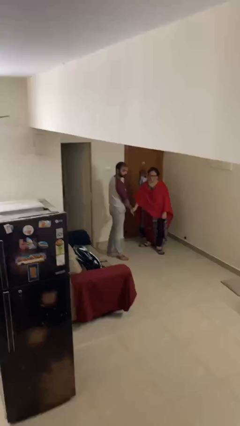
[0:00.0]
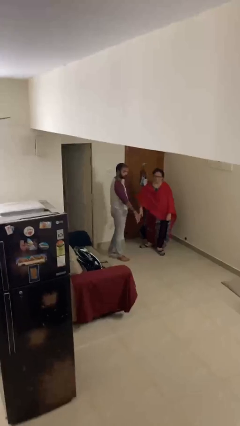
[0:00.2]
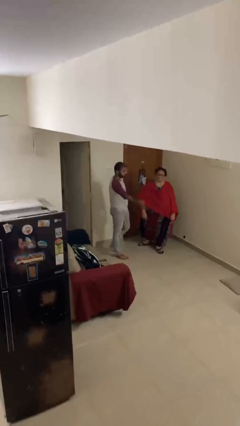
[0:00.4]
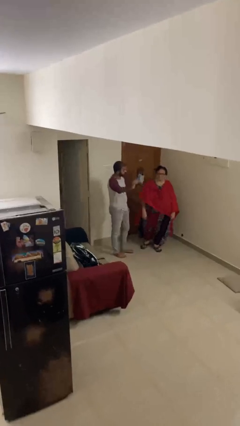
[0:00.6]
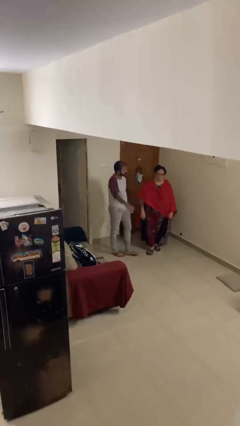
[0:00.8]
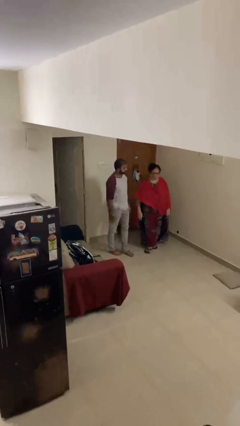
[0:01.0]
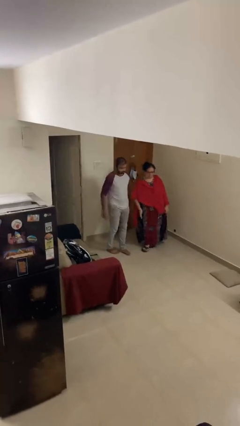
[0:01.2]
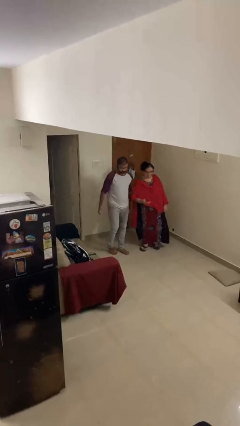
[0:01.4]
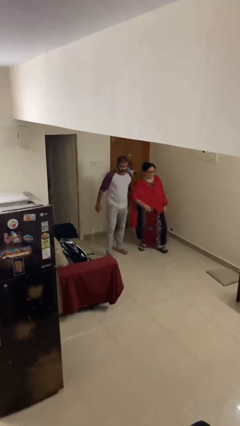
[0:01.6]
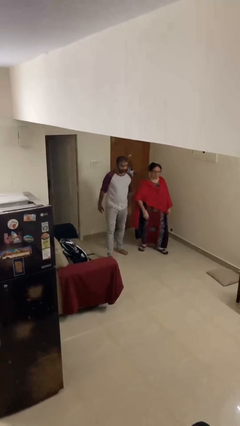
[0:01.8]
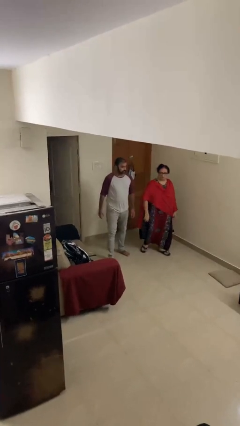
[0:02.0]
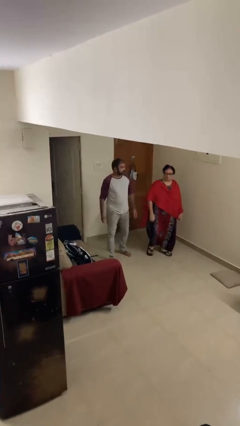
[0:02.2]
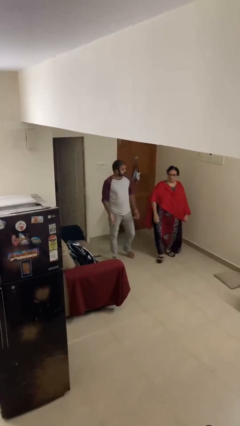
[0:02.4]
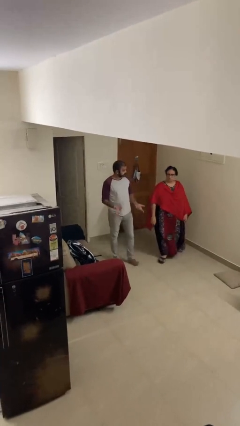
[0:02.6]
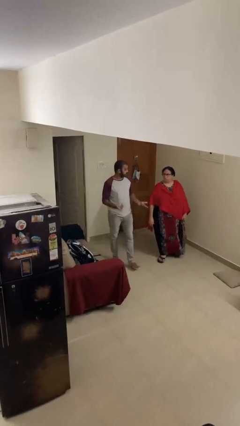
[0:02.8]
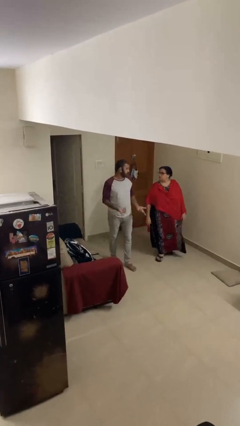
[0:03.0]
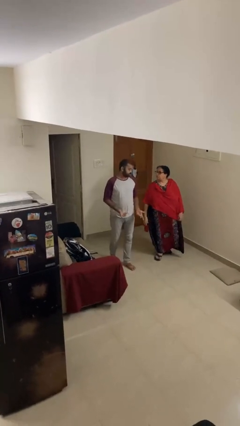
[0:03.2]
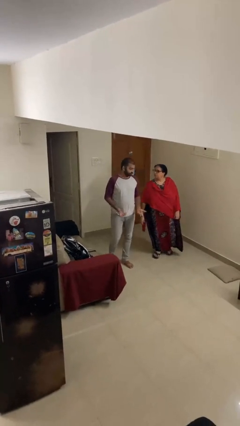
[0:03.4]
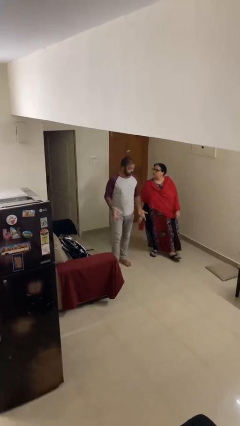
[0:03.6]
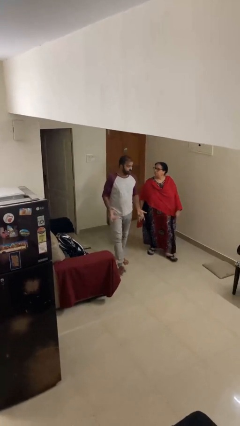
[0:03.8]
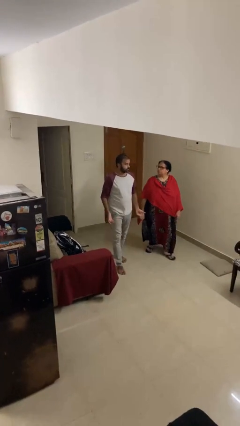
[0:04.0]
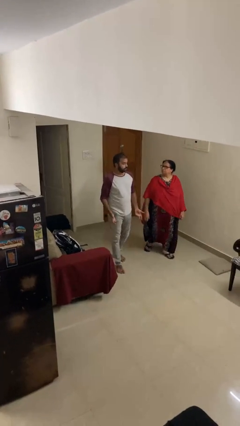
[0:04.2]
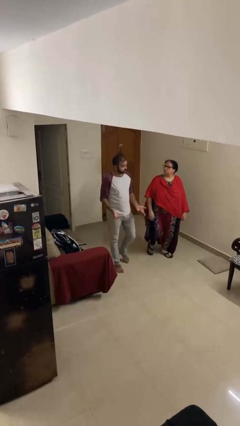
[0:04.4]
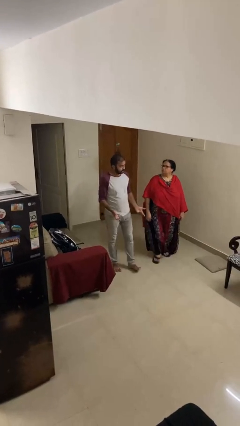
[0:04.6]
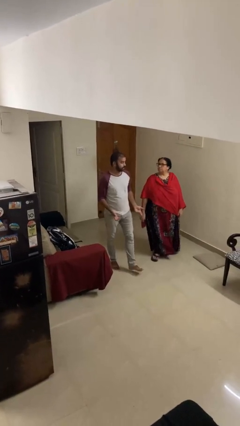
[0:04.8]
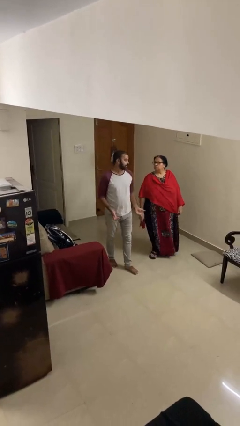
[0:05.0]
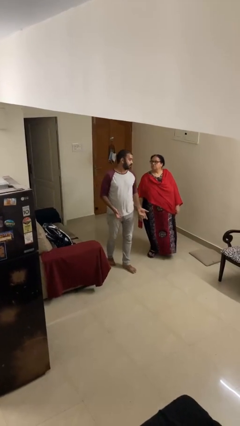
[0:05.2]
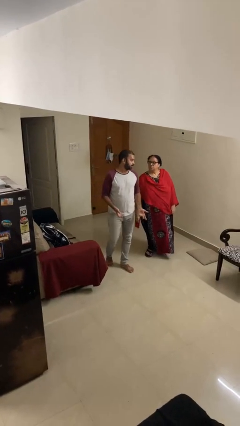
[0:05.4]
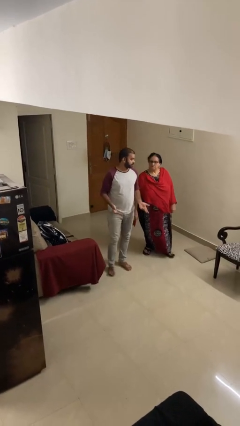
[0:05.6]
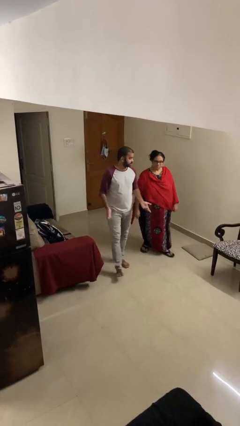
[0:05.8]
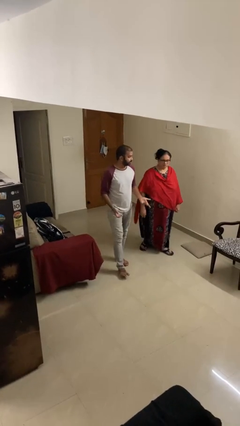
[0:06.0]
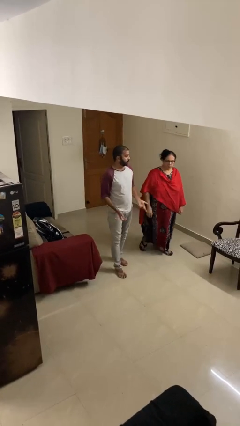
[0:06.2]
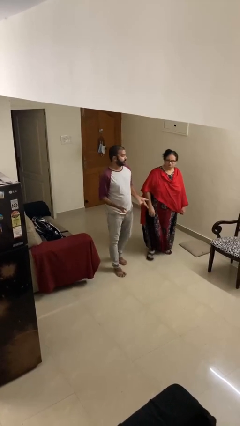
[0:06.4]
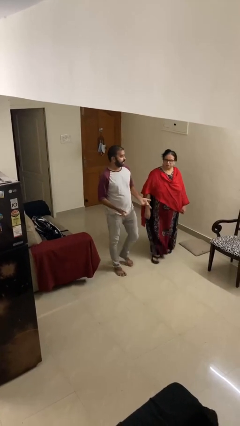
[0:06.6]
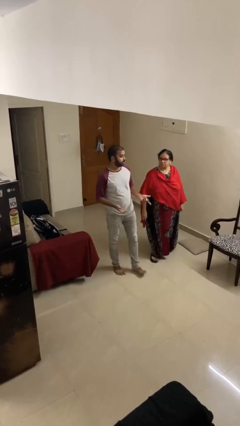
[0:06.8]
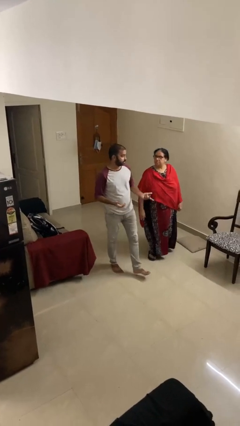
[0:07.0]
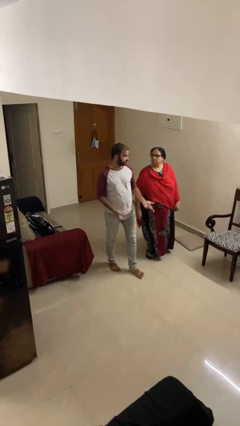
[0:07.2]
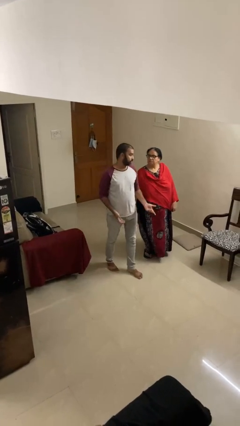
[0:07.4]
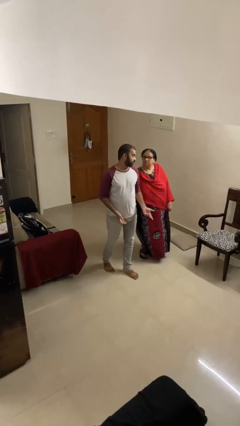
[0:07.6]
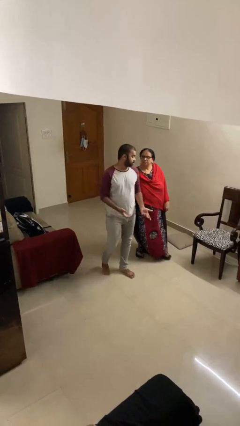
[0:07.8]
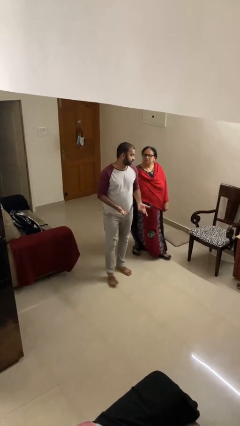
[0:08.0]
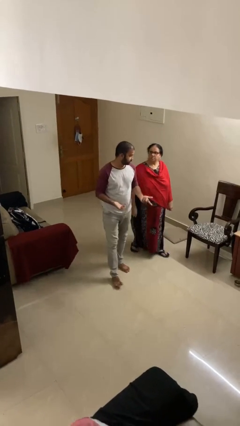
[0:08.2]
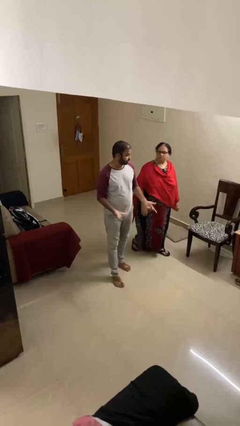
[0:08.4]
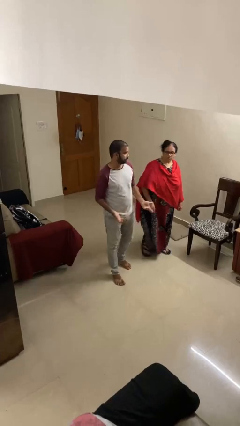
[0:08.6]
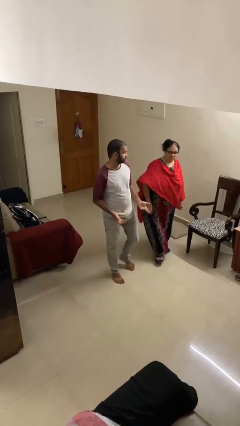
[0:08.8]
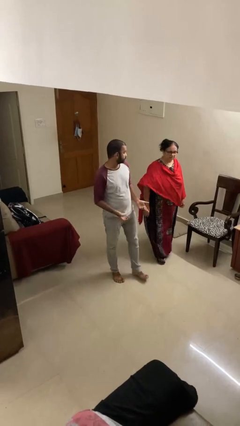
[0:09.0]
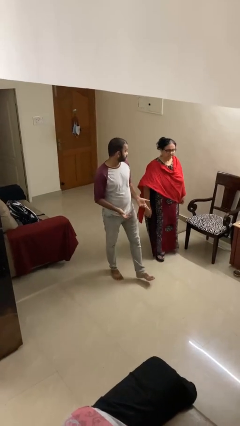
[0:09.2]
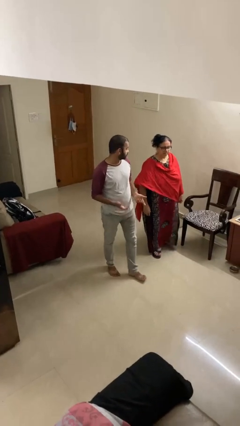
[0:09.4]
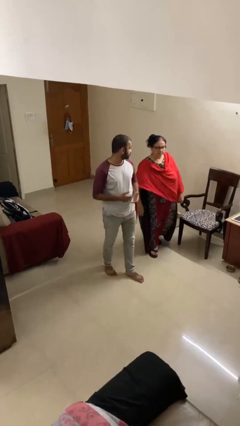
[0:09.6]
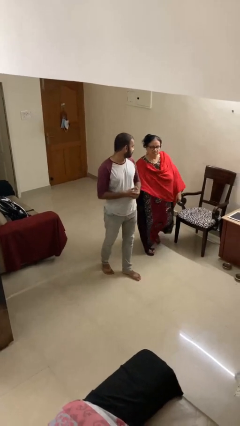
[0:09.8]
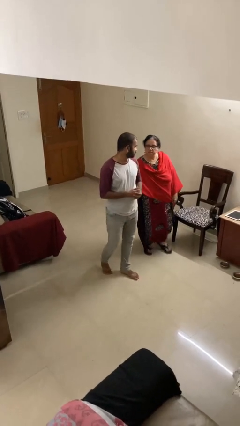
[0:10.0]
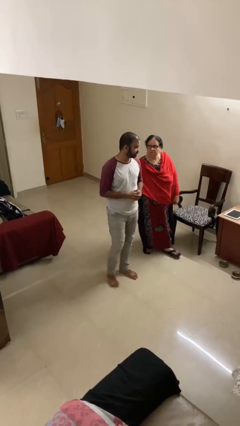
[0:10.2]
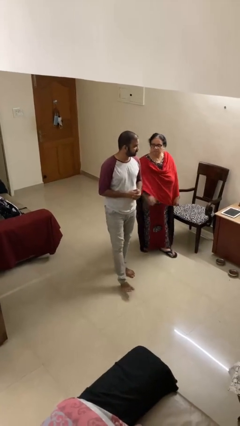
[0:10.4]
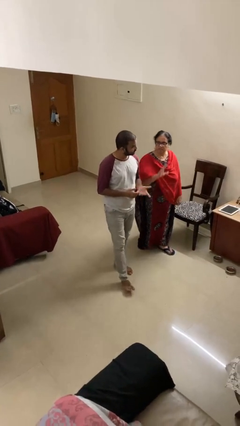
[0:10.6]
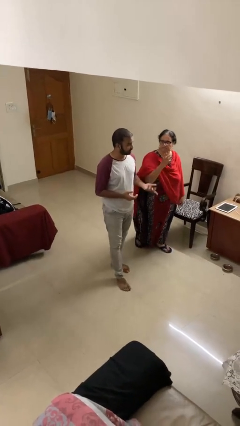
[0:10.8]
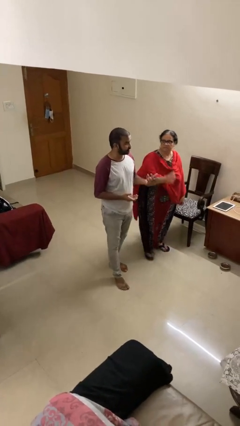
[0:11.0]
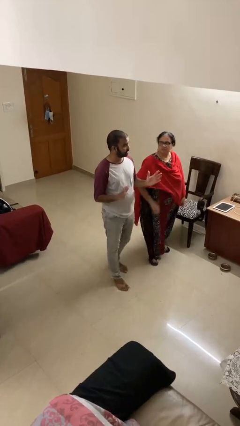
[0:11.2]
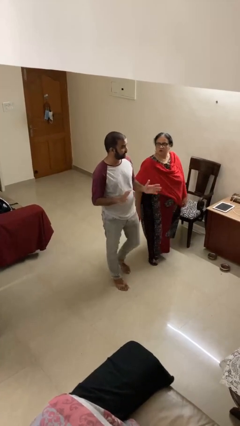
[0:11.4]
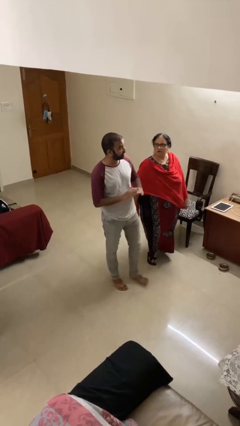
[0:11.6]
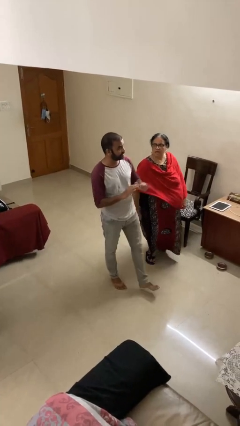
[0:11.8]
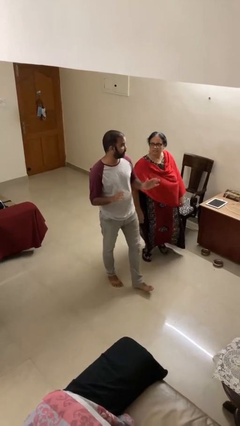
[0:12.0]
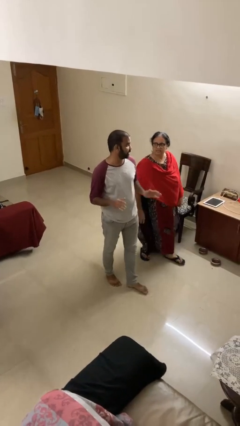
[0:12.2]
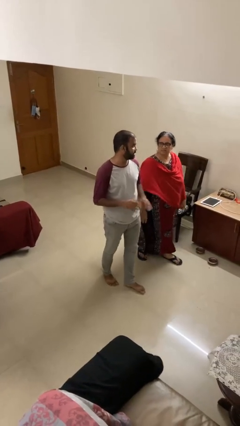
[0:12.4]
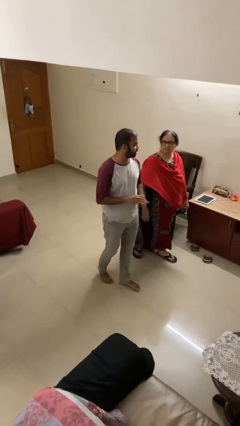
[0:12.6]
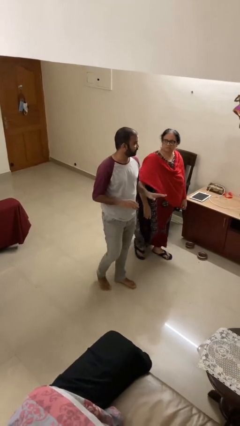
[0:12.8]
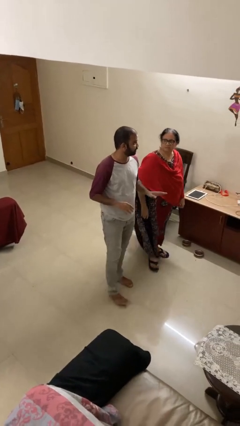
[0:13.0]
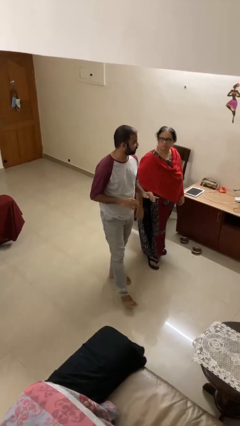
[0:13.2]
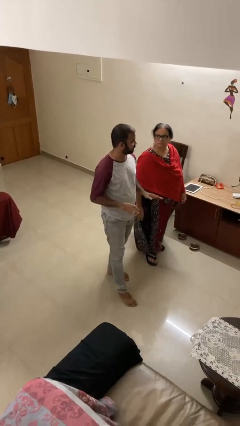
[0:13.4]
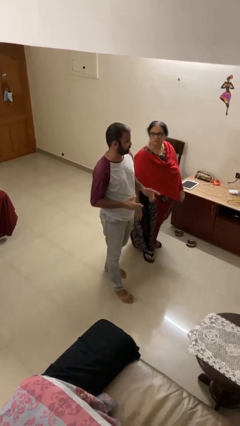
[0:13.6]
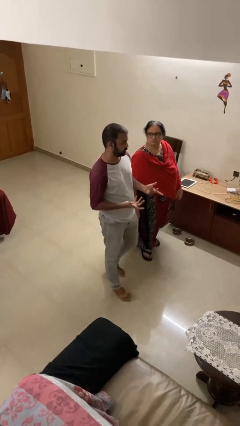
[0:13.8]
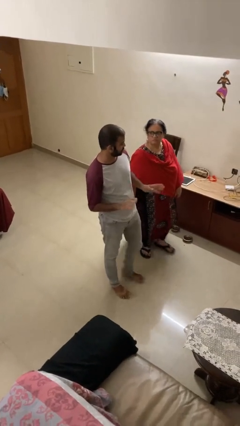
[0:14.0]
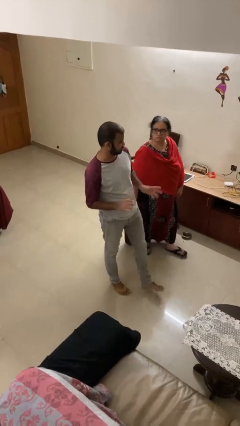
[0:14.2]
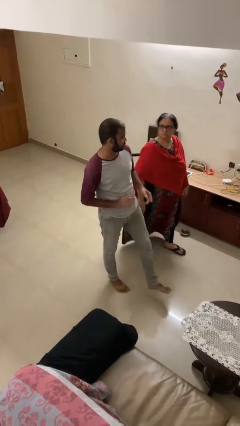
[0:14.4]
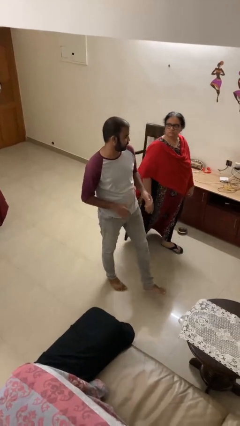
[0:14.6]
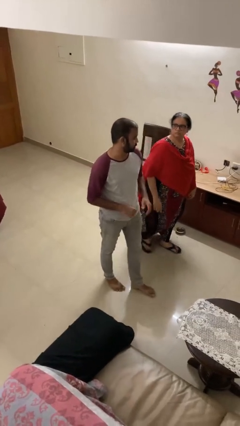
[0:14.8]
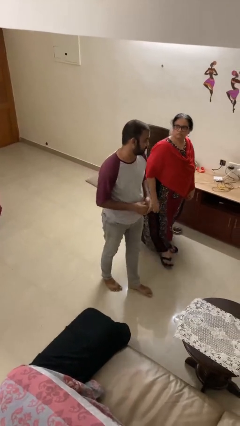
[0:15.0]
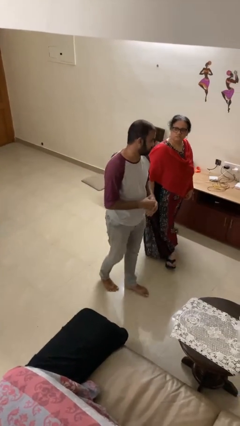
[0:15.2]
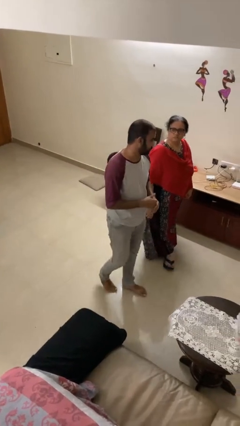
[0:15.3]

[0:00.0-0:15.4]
person talks to person

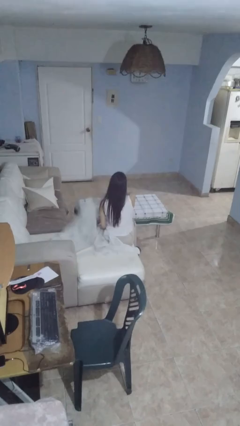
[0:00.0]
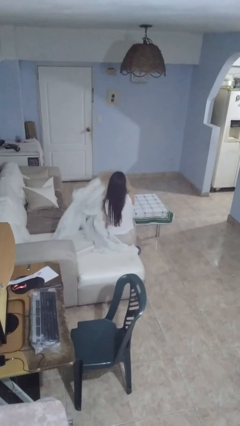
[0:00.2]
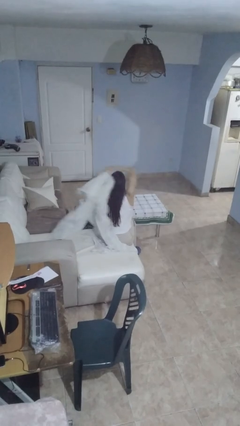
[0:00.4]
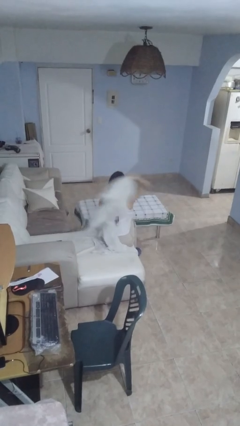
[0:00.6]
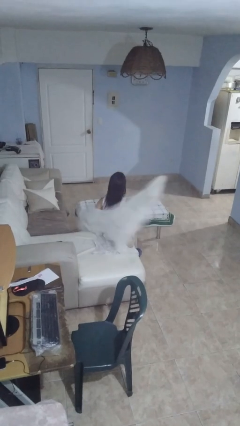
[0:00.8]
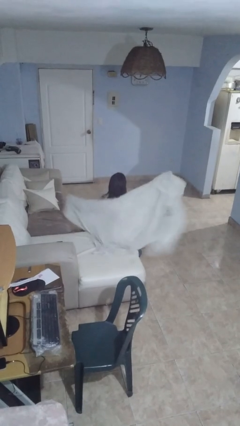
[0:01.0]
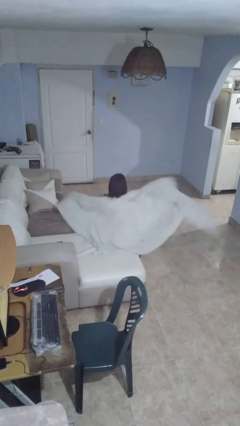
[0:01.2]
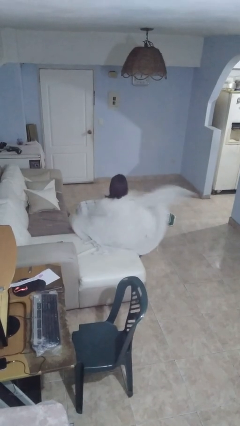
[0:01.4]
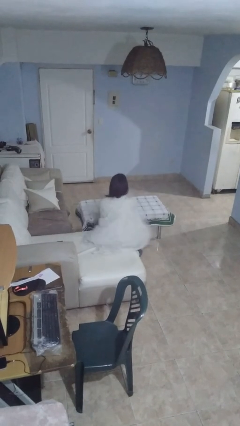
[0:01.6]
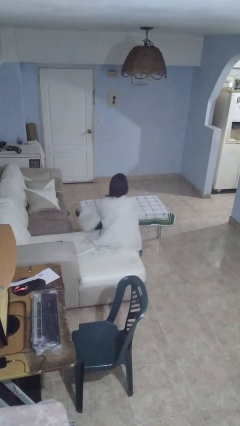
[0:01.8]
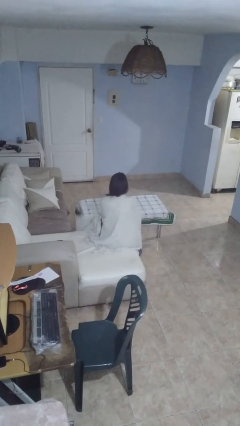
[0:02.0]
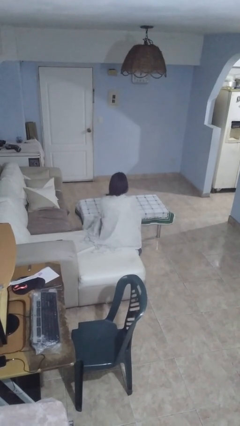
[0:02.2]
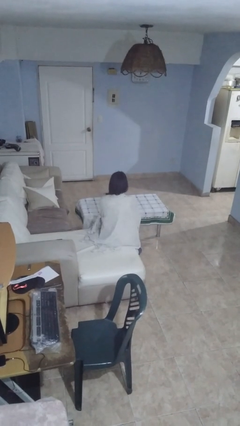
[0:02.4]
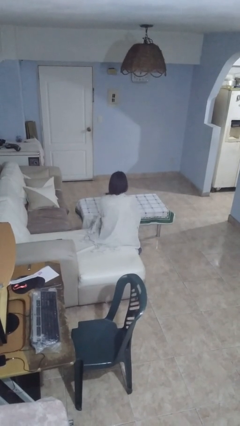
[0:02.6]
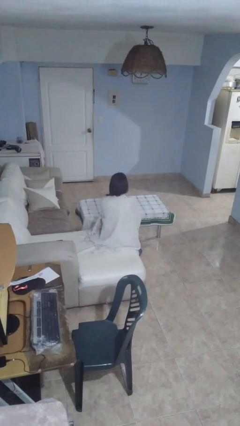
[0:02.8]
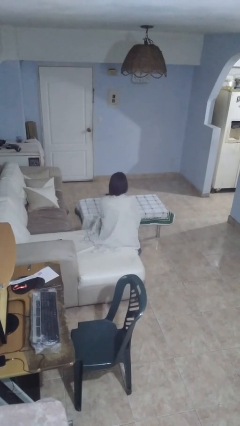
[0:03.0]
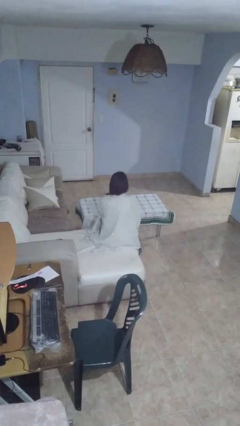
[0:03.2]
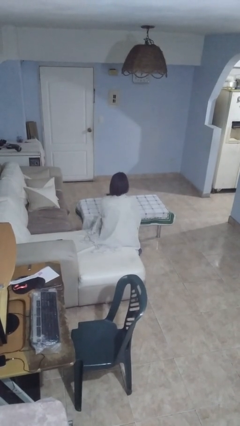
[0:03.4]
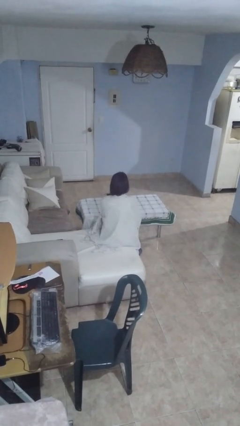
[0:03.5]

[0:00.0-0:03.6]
person covers with blanket
